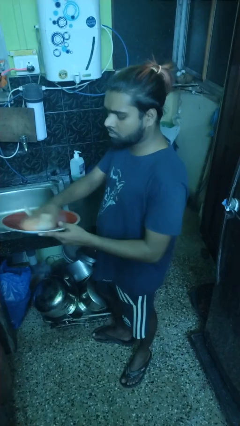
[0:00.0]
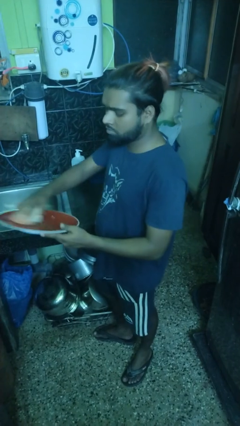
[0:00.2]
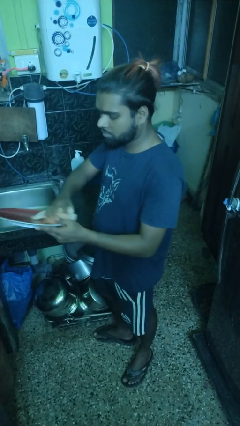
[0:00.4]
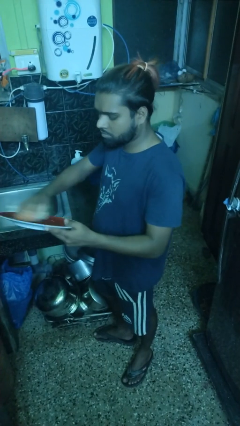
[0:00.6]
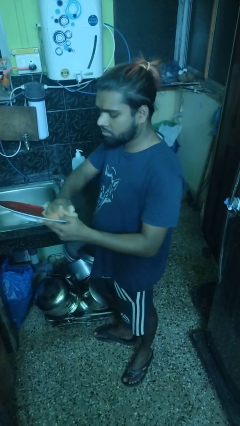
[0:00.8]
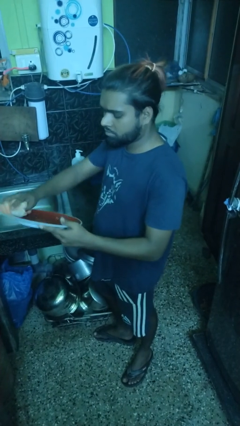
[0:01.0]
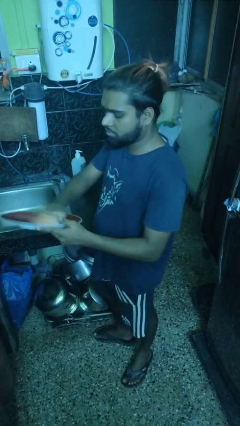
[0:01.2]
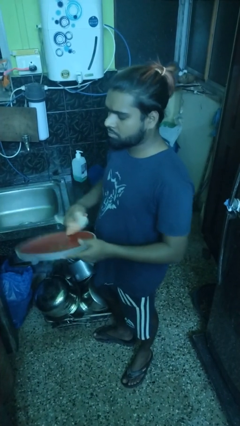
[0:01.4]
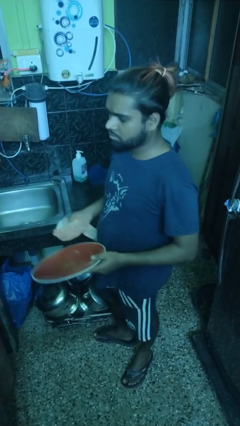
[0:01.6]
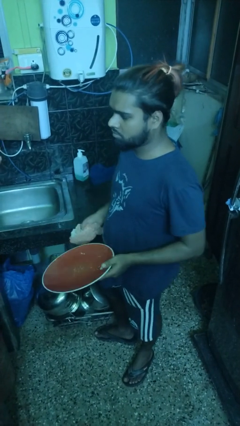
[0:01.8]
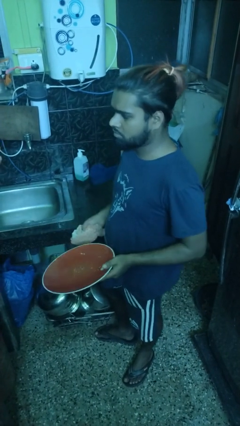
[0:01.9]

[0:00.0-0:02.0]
person dries dish

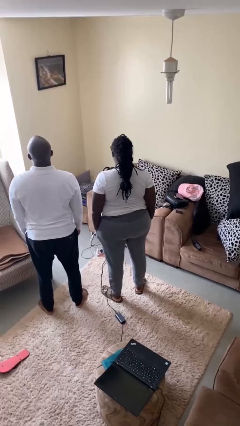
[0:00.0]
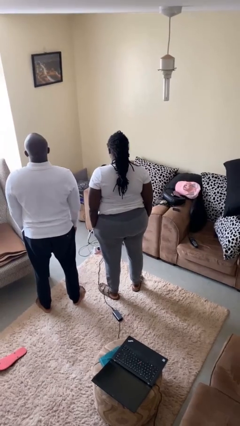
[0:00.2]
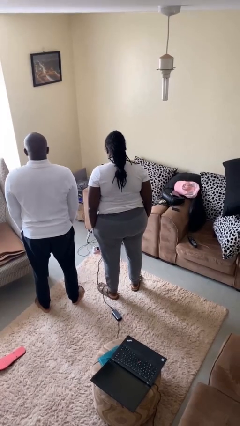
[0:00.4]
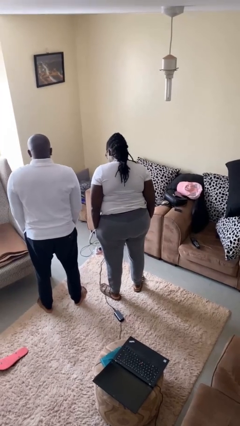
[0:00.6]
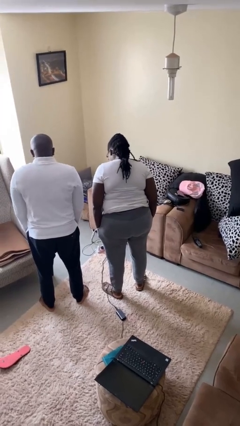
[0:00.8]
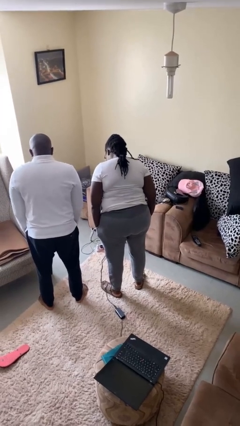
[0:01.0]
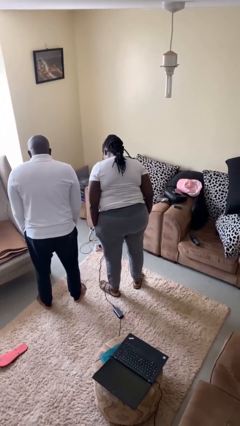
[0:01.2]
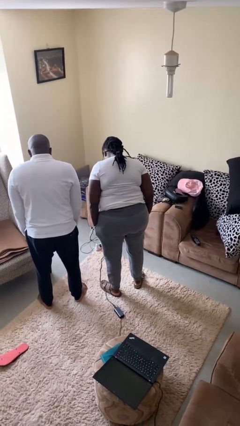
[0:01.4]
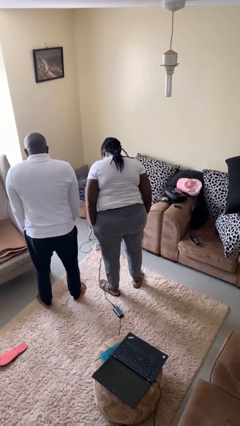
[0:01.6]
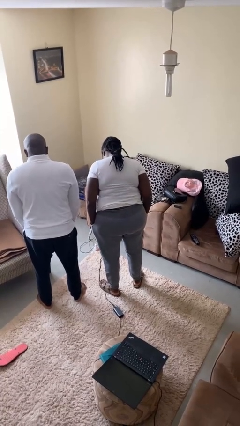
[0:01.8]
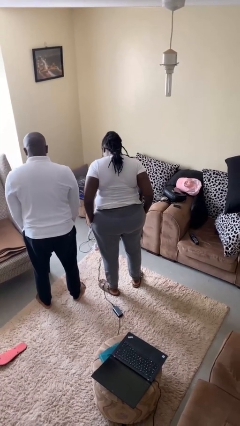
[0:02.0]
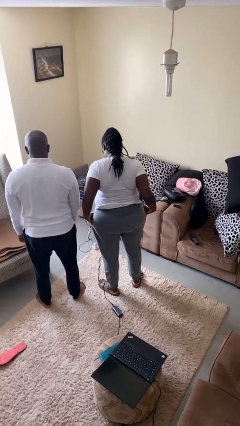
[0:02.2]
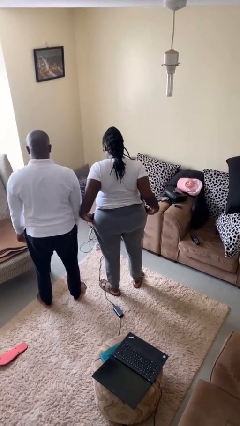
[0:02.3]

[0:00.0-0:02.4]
person laughs with person

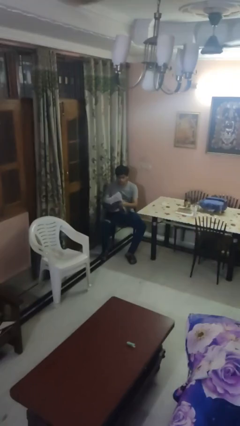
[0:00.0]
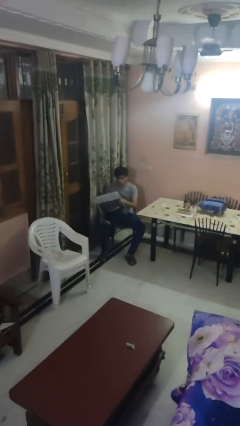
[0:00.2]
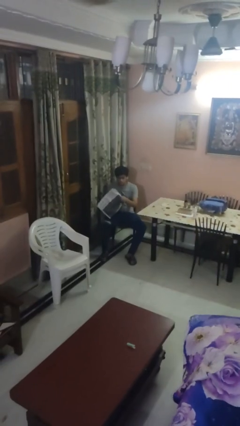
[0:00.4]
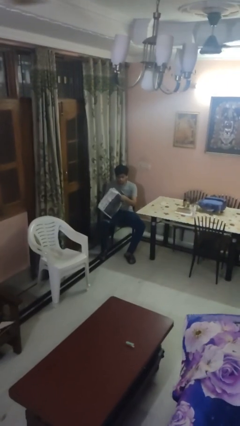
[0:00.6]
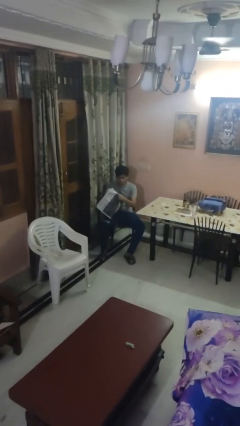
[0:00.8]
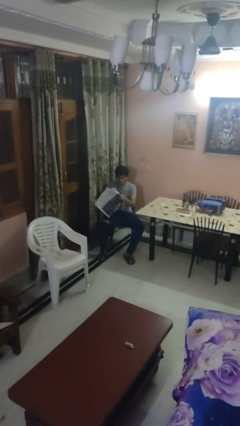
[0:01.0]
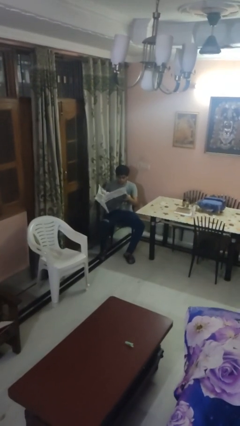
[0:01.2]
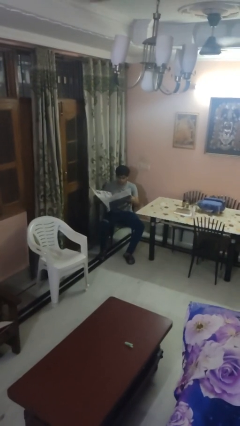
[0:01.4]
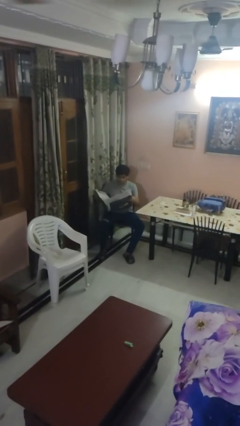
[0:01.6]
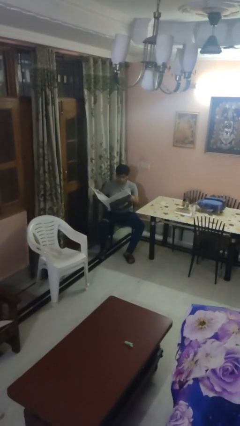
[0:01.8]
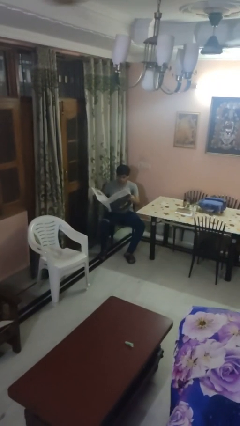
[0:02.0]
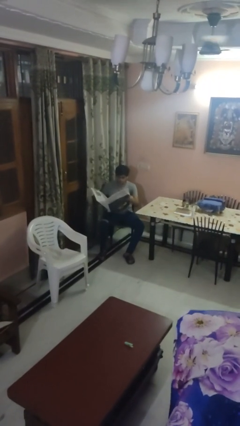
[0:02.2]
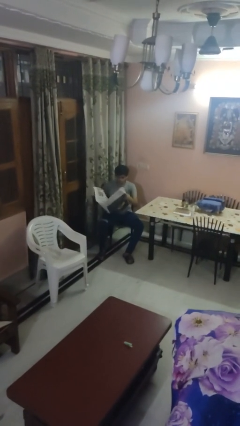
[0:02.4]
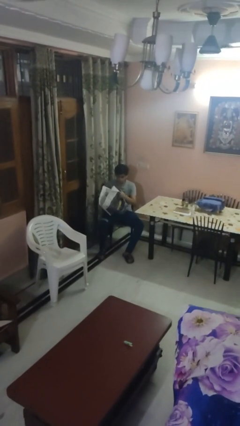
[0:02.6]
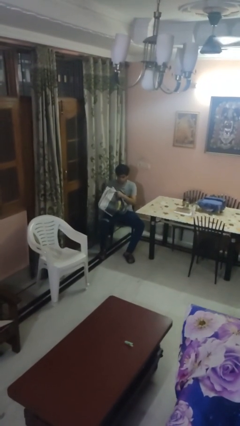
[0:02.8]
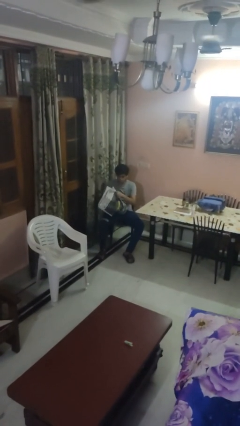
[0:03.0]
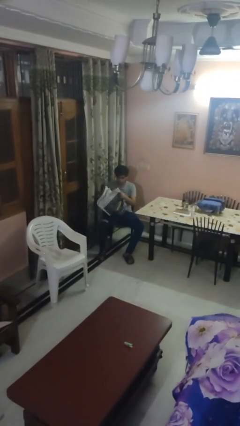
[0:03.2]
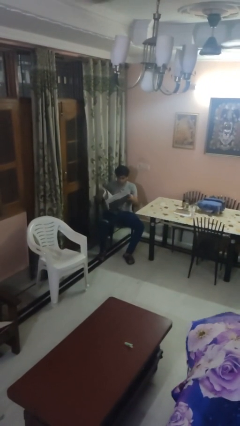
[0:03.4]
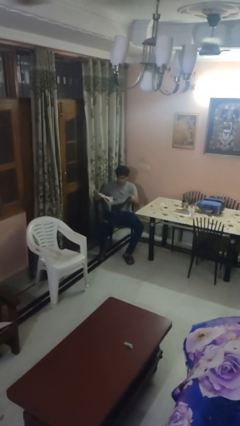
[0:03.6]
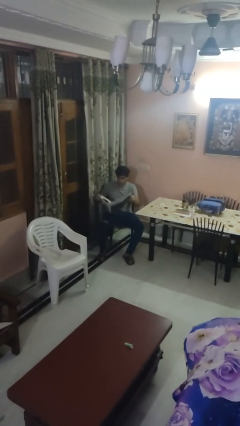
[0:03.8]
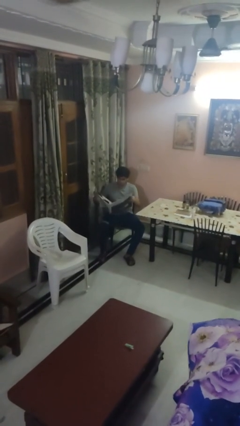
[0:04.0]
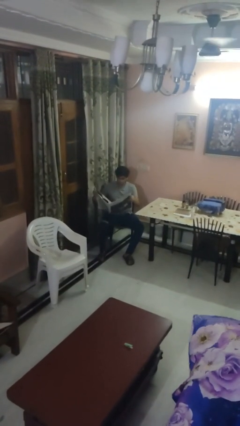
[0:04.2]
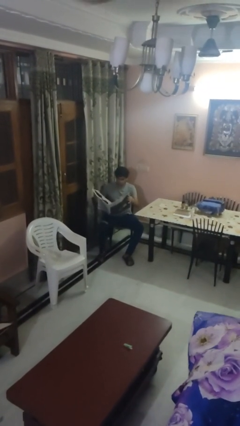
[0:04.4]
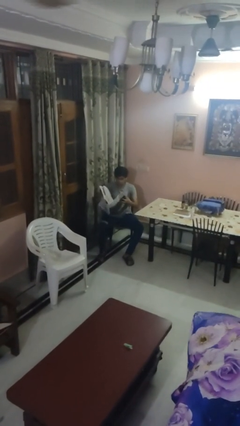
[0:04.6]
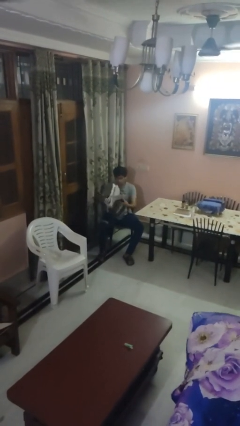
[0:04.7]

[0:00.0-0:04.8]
person reads newspaper

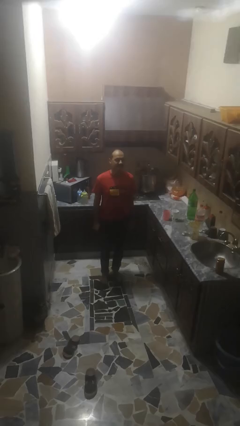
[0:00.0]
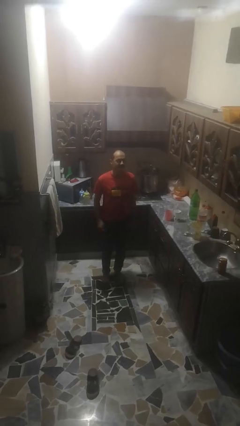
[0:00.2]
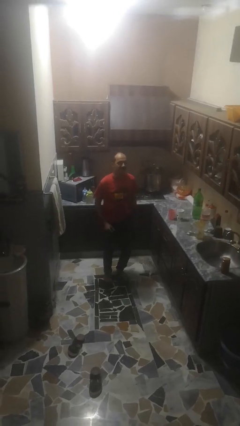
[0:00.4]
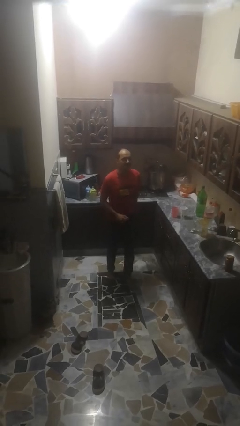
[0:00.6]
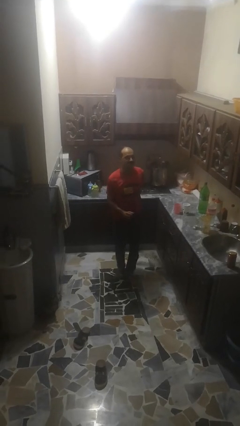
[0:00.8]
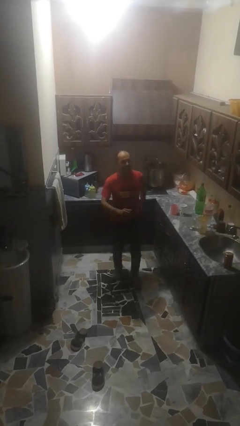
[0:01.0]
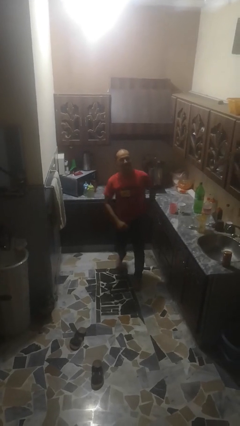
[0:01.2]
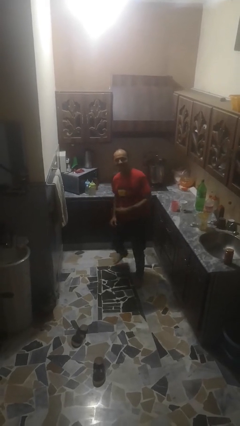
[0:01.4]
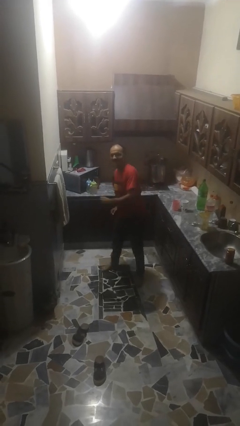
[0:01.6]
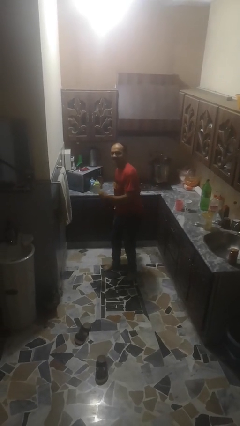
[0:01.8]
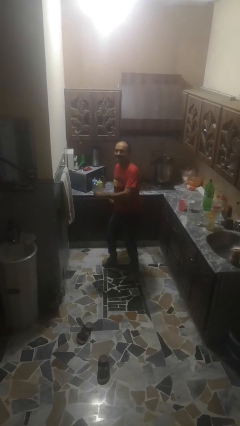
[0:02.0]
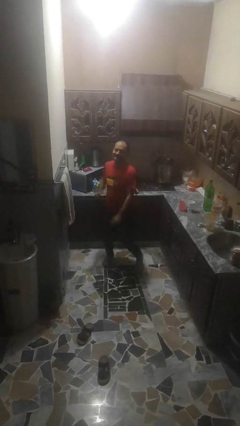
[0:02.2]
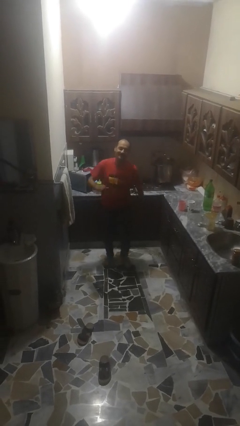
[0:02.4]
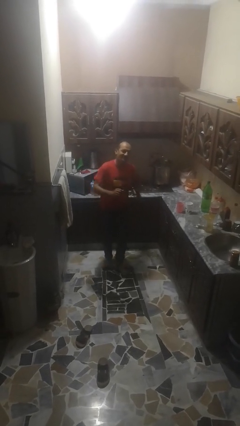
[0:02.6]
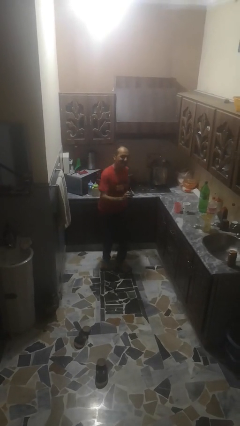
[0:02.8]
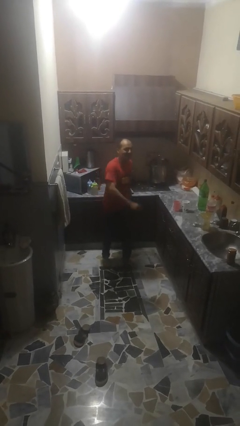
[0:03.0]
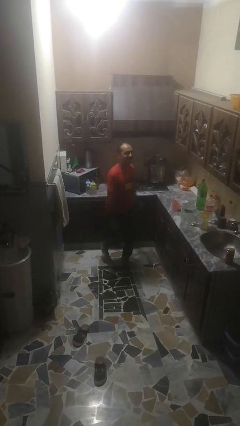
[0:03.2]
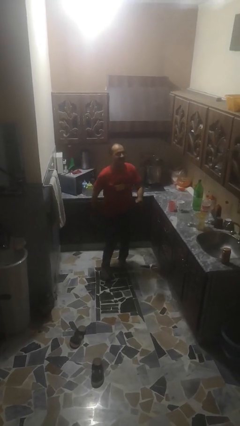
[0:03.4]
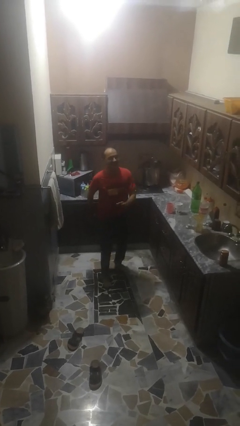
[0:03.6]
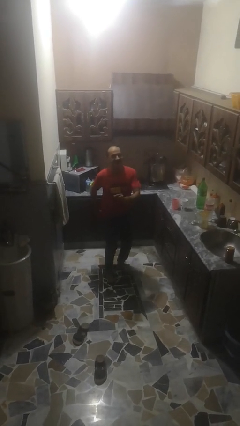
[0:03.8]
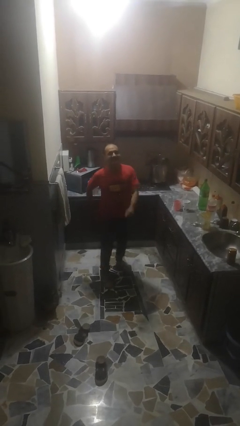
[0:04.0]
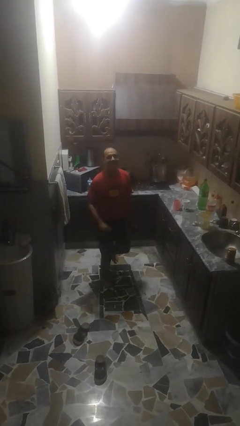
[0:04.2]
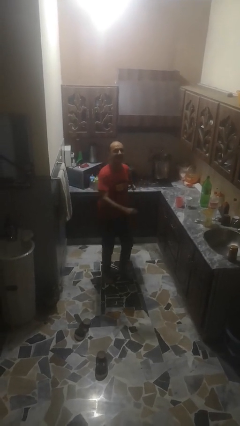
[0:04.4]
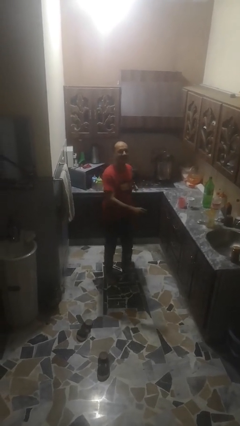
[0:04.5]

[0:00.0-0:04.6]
person dances in place

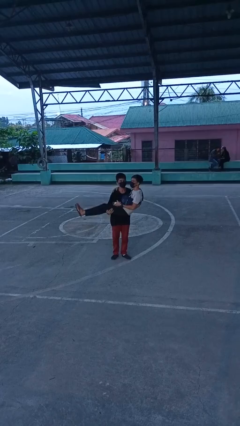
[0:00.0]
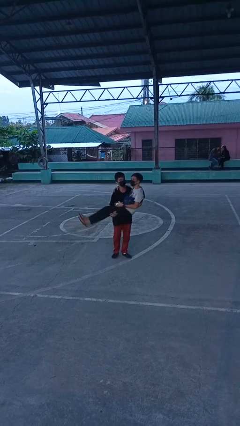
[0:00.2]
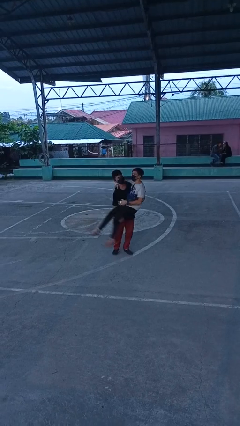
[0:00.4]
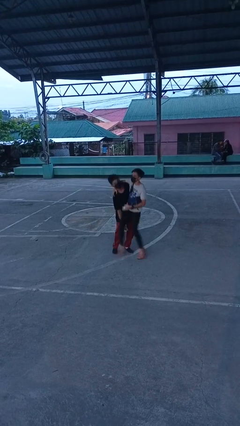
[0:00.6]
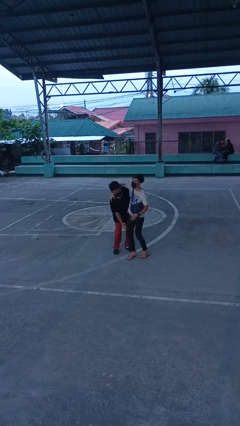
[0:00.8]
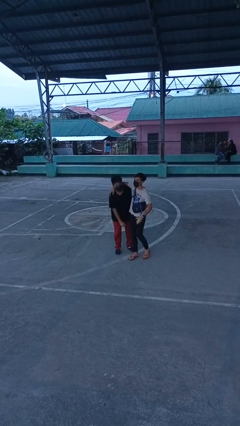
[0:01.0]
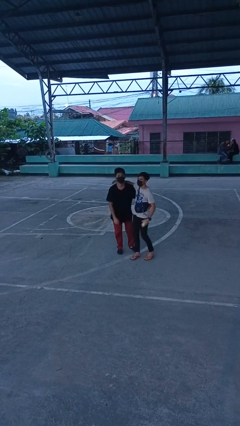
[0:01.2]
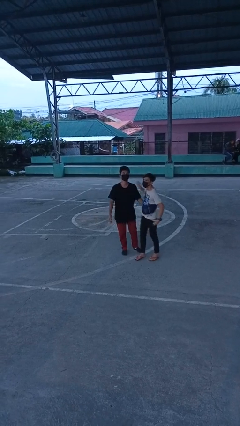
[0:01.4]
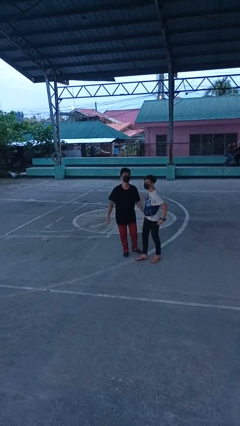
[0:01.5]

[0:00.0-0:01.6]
person puts down person

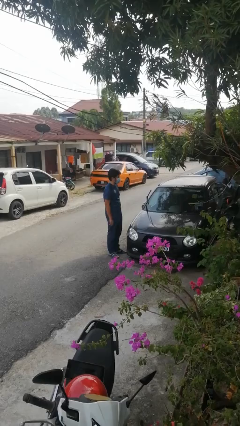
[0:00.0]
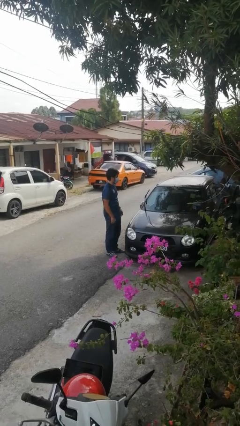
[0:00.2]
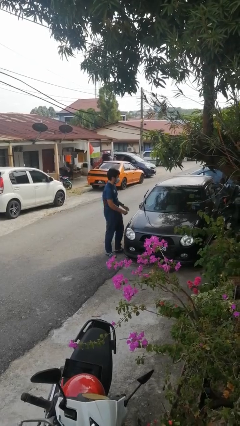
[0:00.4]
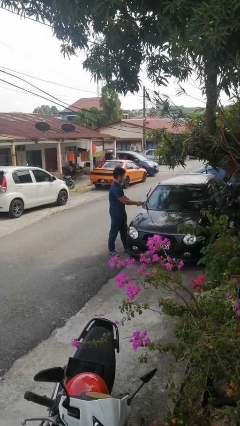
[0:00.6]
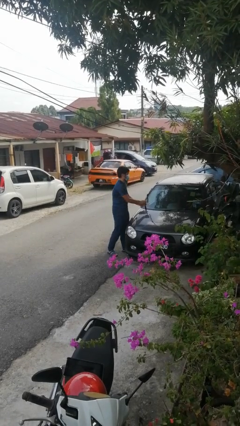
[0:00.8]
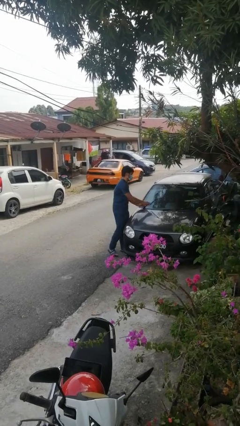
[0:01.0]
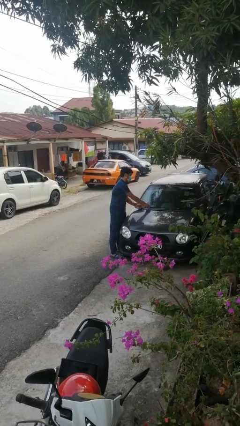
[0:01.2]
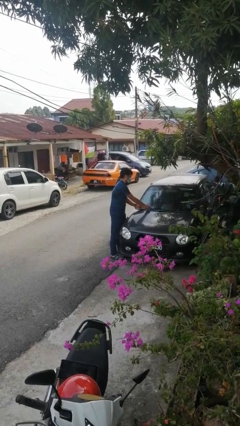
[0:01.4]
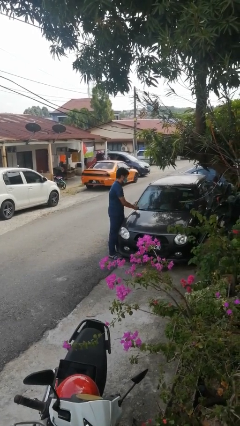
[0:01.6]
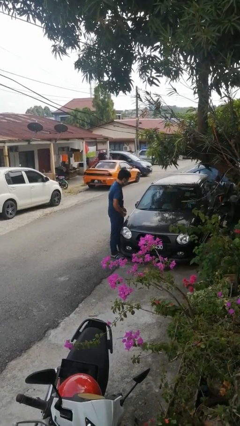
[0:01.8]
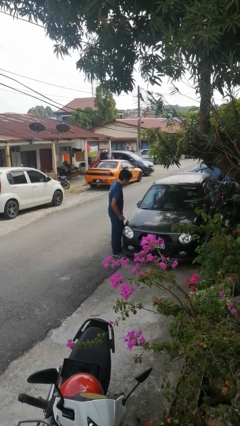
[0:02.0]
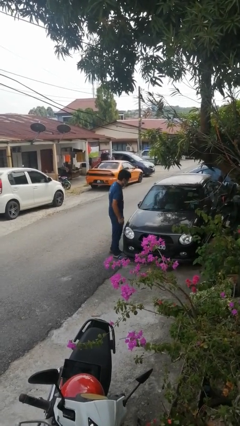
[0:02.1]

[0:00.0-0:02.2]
person flips down car wipers
